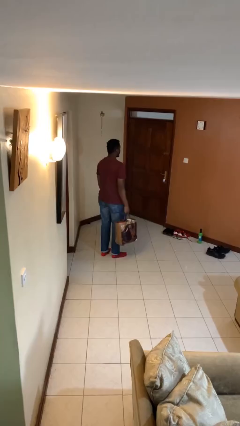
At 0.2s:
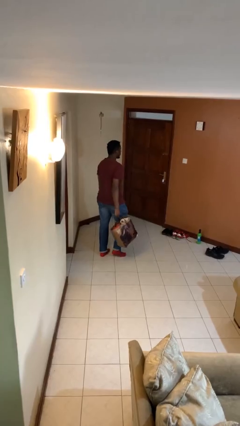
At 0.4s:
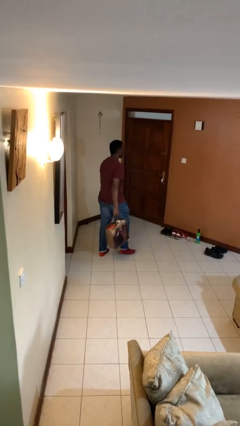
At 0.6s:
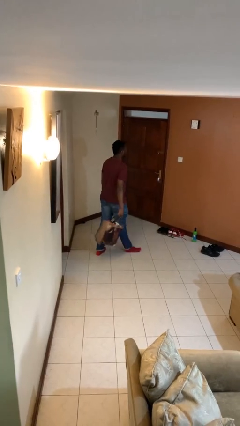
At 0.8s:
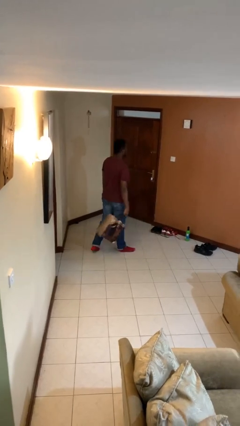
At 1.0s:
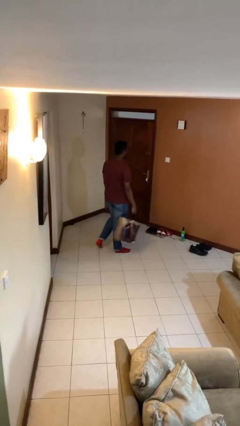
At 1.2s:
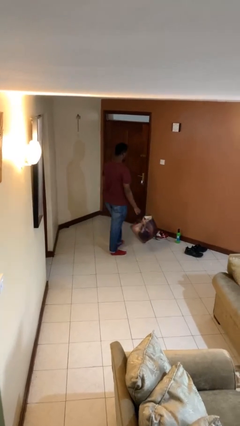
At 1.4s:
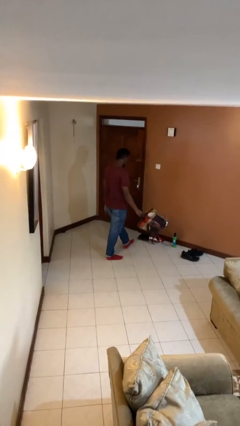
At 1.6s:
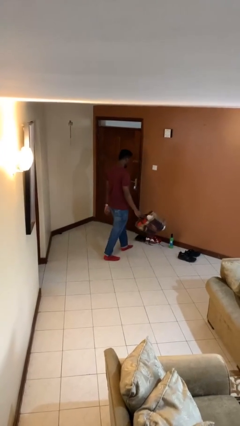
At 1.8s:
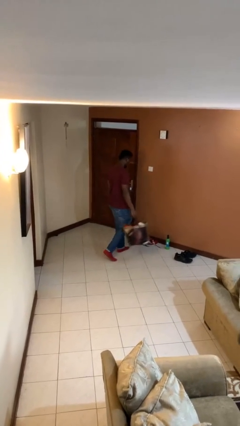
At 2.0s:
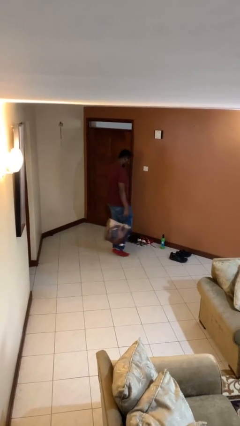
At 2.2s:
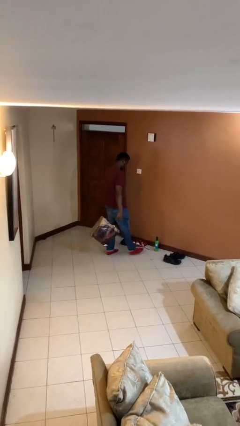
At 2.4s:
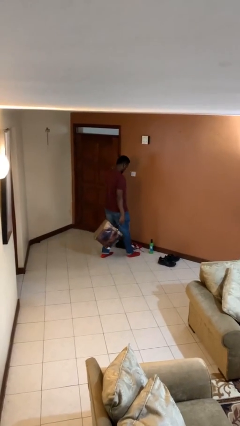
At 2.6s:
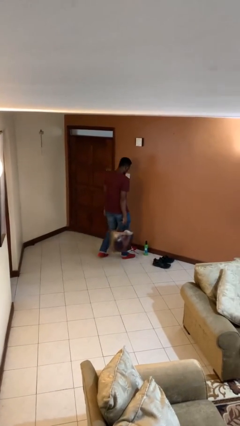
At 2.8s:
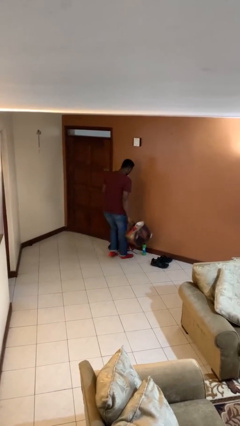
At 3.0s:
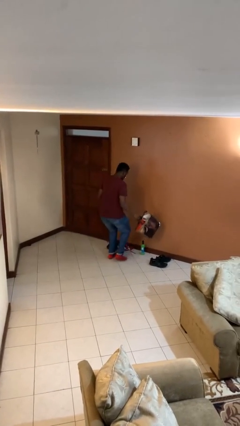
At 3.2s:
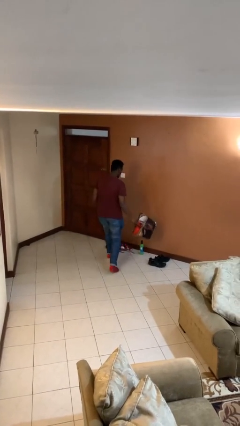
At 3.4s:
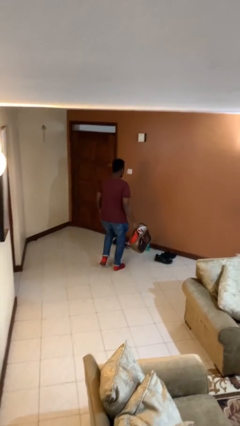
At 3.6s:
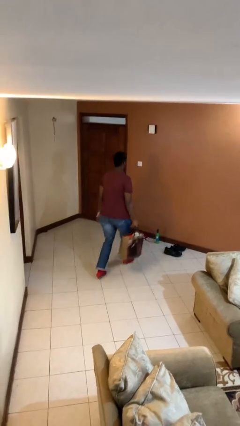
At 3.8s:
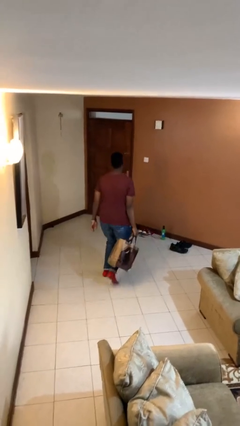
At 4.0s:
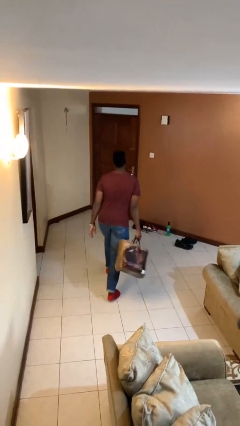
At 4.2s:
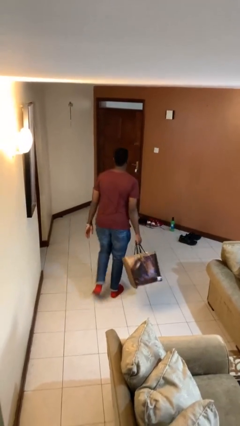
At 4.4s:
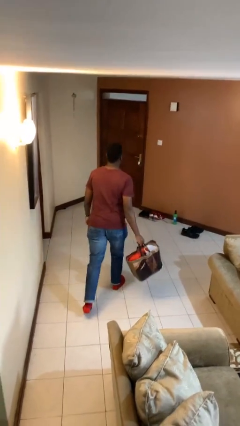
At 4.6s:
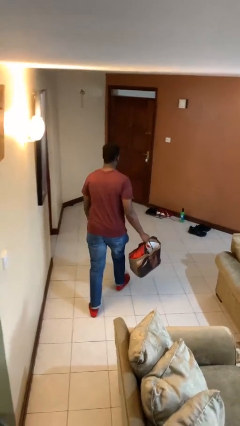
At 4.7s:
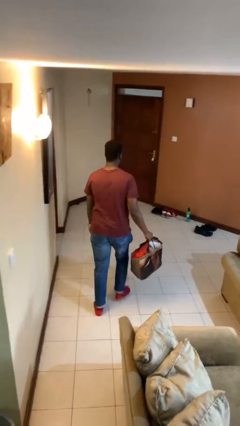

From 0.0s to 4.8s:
person carries groceries

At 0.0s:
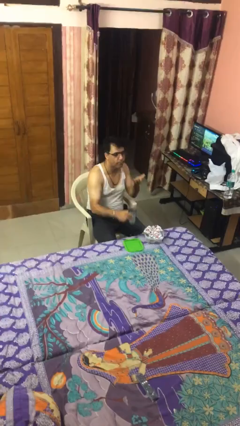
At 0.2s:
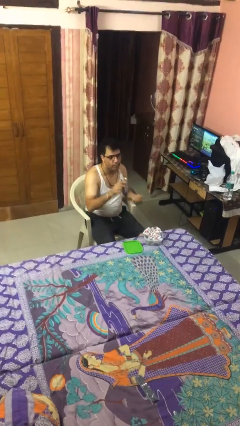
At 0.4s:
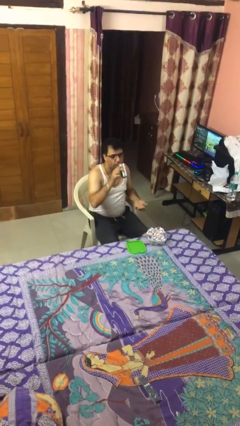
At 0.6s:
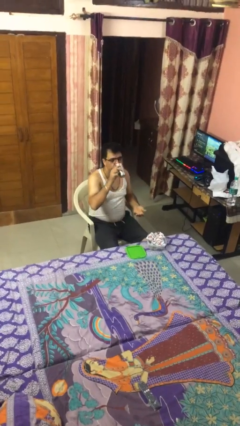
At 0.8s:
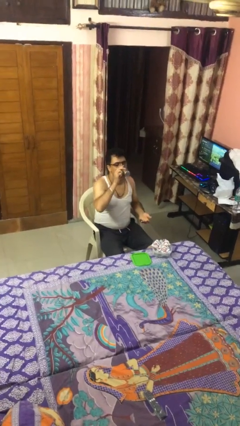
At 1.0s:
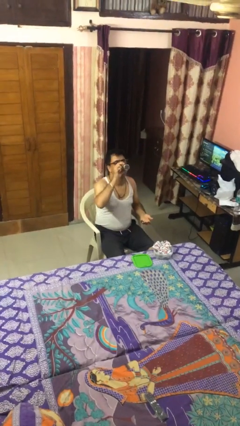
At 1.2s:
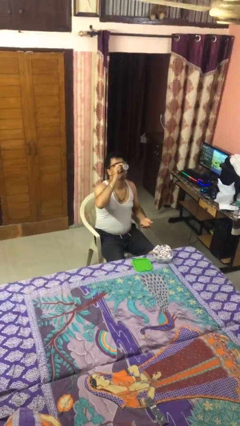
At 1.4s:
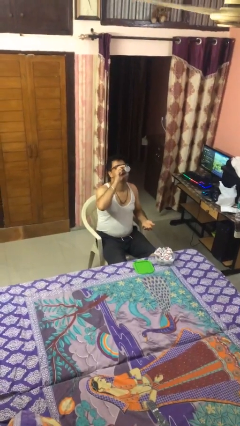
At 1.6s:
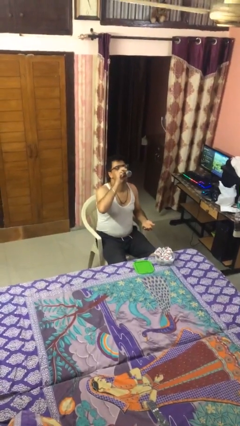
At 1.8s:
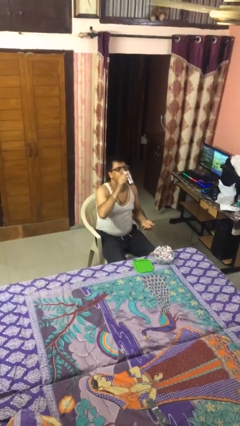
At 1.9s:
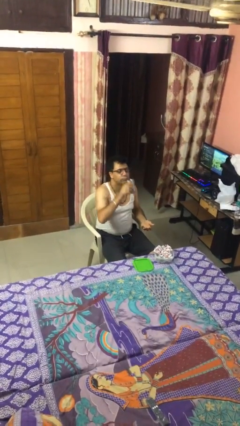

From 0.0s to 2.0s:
person drinks from cup

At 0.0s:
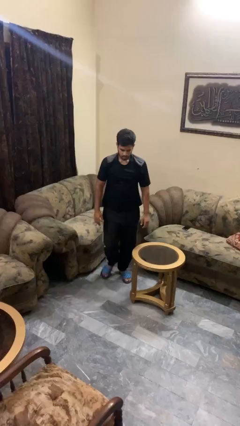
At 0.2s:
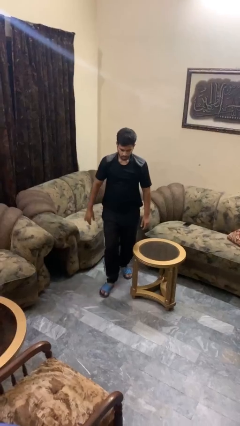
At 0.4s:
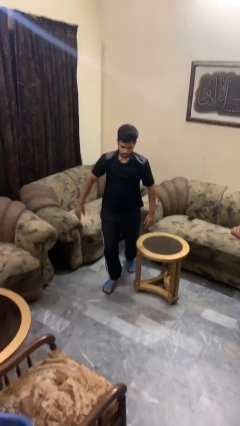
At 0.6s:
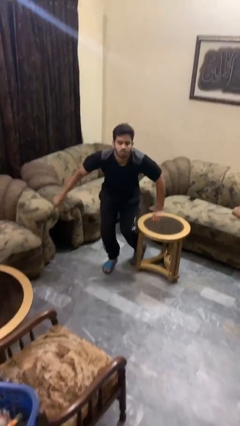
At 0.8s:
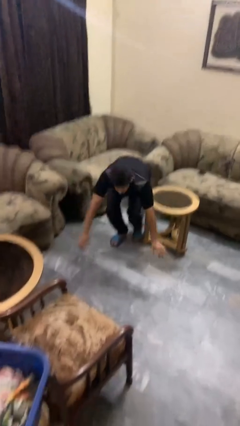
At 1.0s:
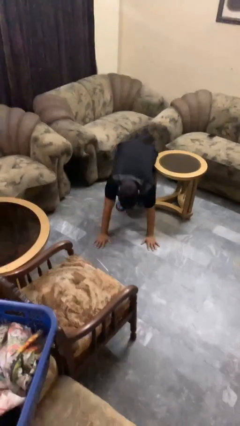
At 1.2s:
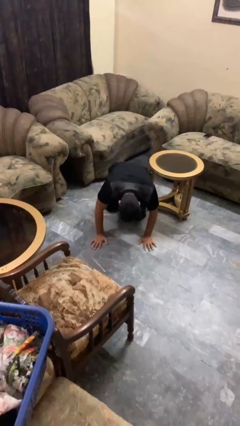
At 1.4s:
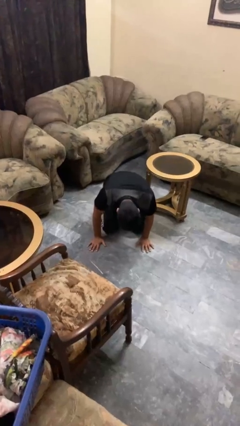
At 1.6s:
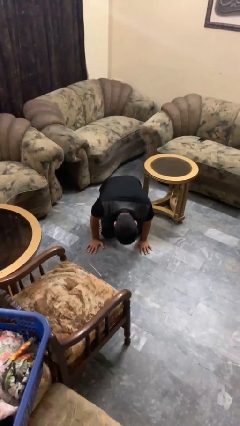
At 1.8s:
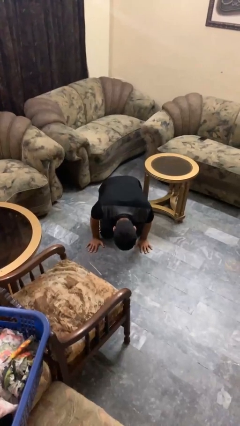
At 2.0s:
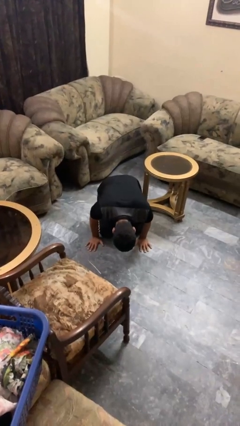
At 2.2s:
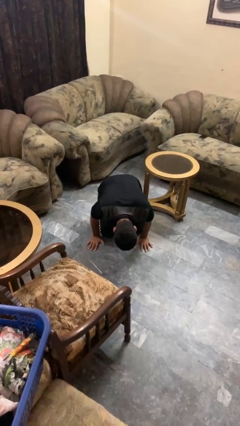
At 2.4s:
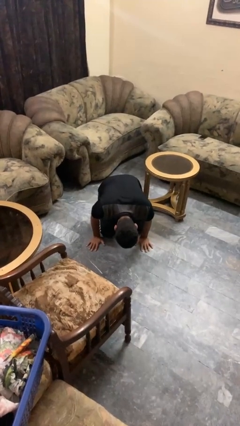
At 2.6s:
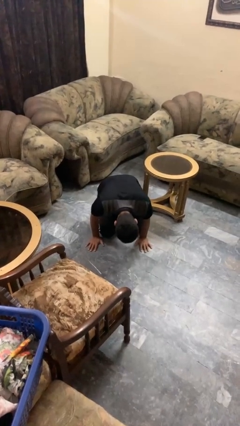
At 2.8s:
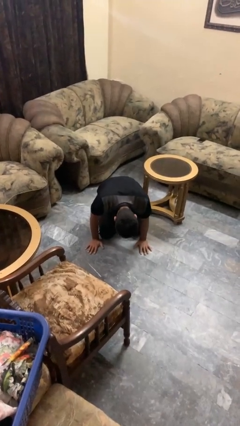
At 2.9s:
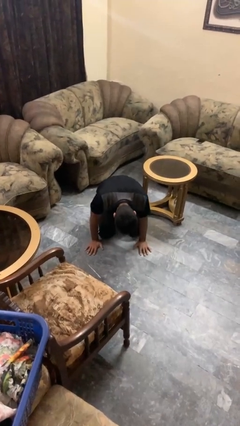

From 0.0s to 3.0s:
person trips on object on floor

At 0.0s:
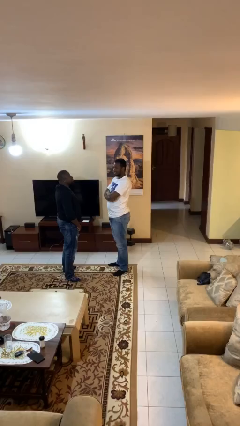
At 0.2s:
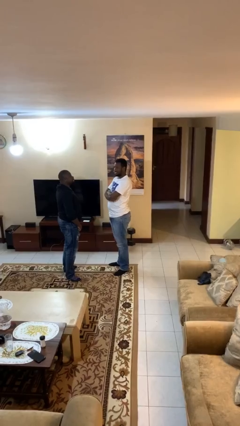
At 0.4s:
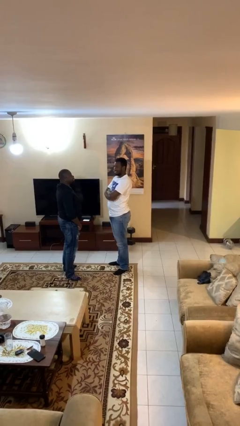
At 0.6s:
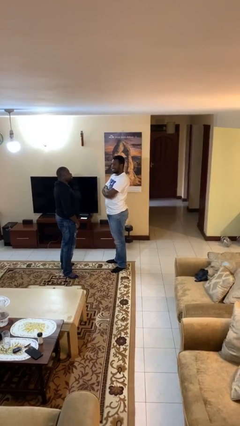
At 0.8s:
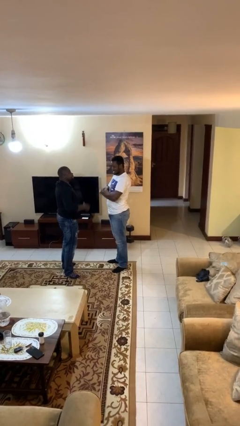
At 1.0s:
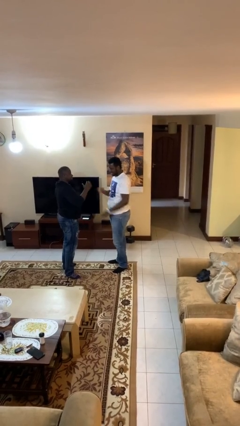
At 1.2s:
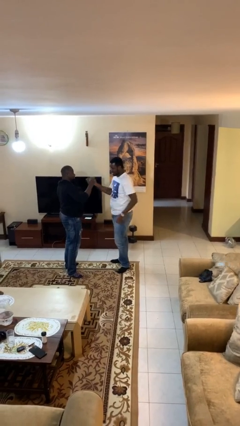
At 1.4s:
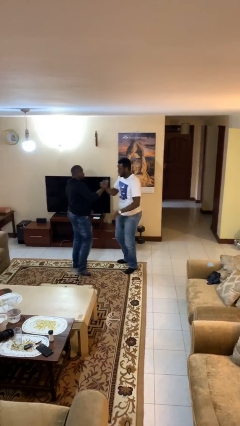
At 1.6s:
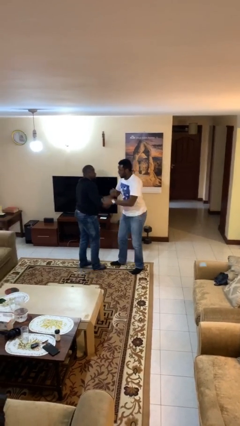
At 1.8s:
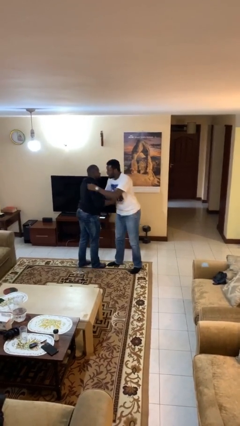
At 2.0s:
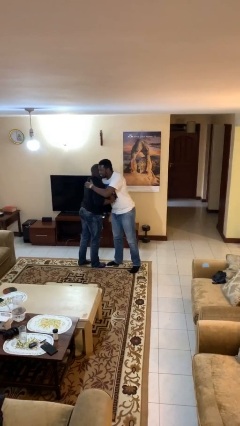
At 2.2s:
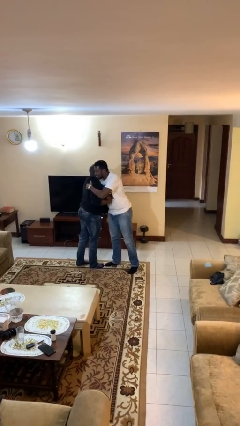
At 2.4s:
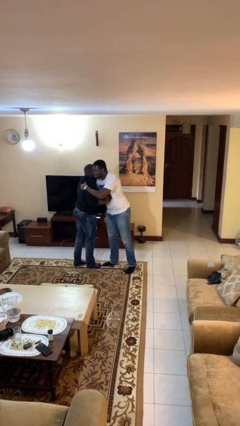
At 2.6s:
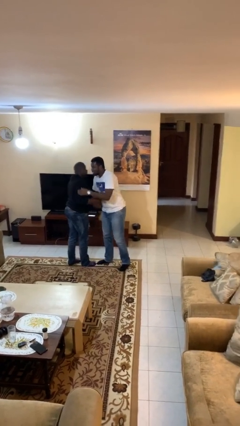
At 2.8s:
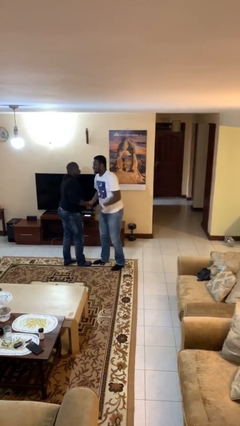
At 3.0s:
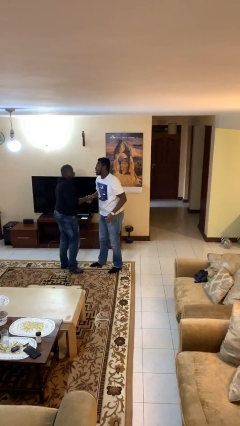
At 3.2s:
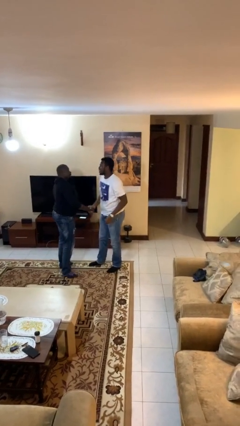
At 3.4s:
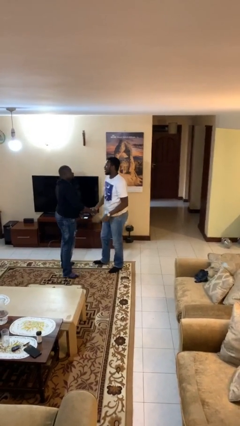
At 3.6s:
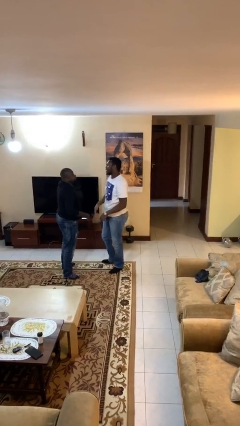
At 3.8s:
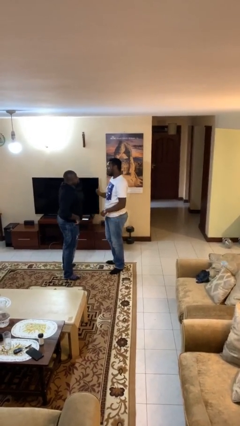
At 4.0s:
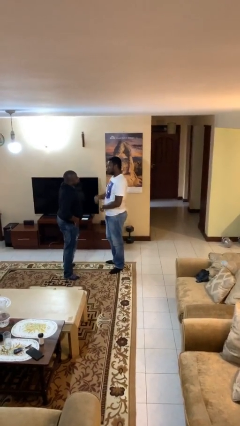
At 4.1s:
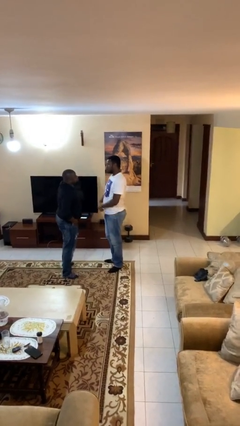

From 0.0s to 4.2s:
person embraces person

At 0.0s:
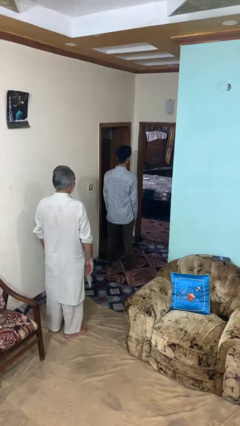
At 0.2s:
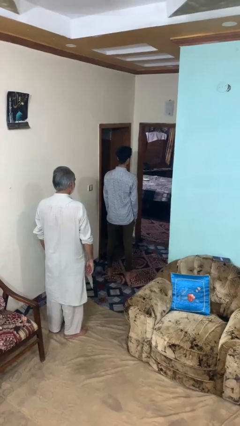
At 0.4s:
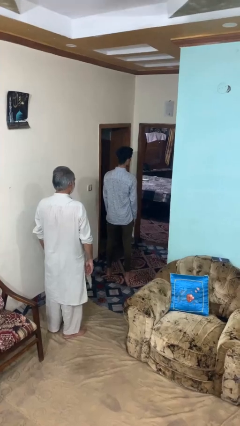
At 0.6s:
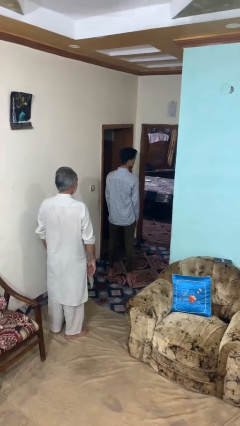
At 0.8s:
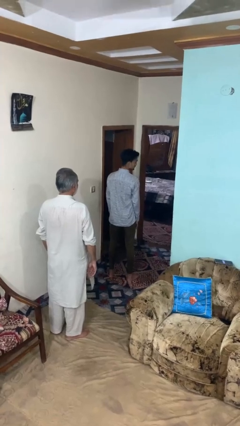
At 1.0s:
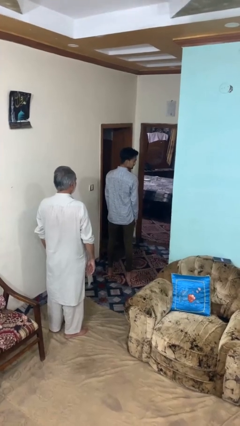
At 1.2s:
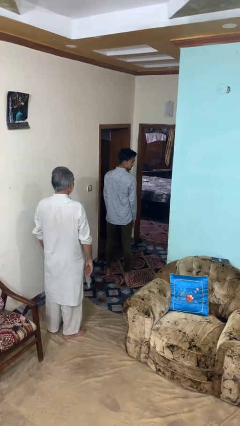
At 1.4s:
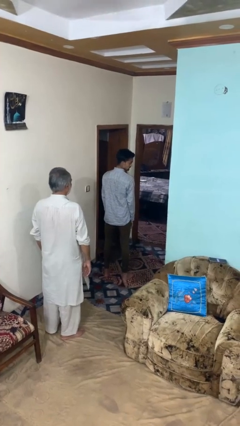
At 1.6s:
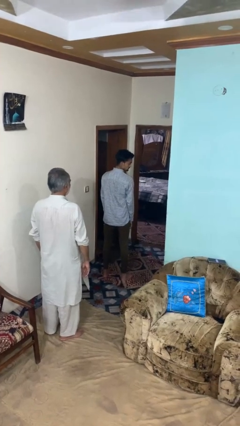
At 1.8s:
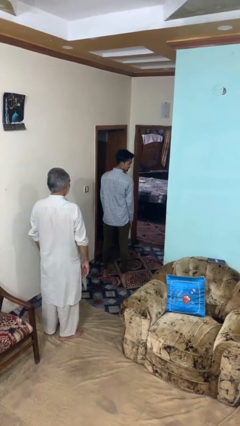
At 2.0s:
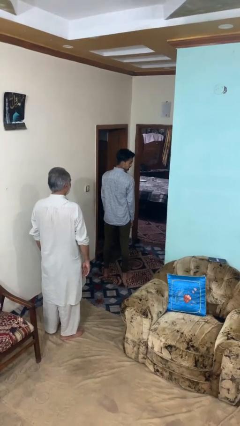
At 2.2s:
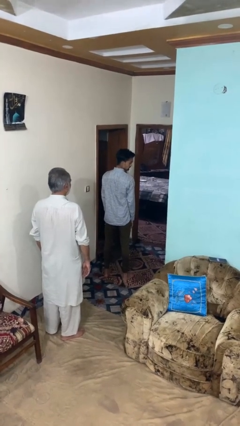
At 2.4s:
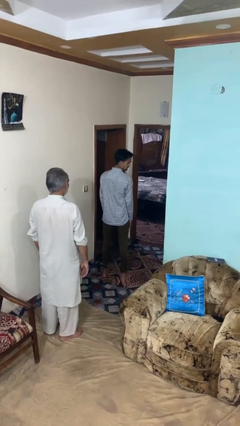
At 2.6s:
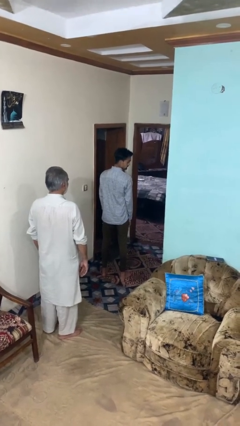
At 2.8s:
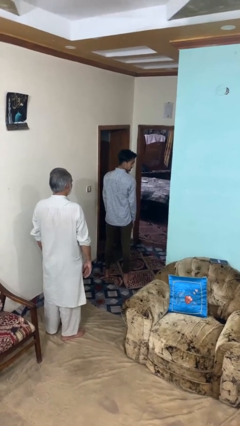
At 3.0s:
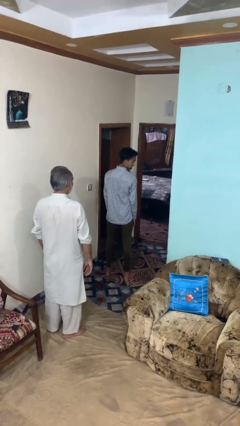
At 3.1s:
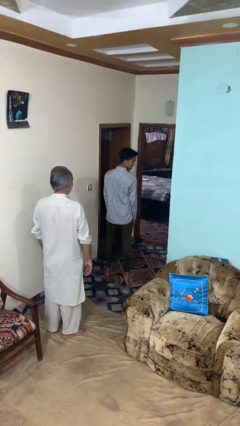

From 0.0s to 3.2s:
person looks over shoulder

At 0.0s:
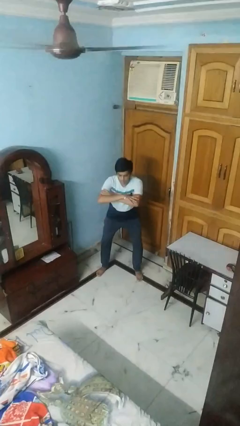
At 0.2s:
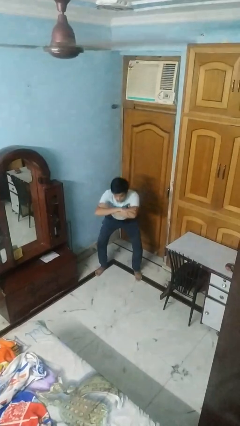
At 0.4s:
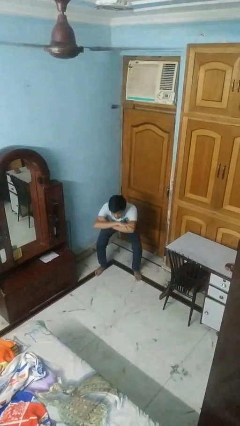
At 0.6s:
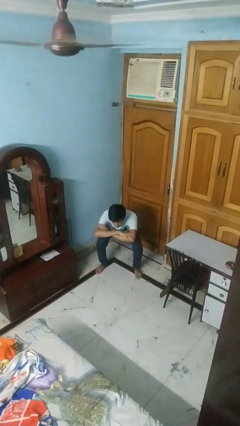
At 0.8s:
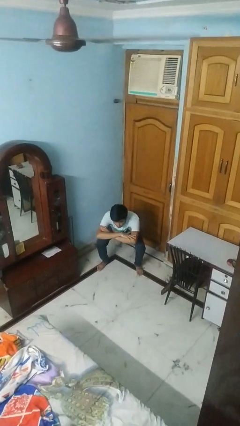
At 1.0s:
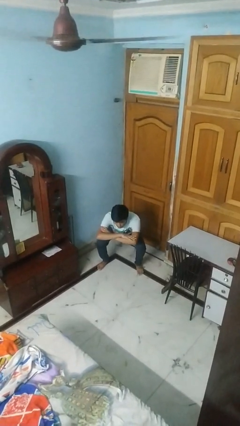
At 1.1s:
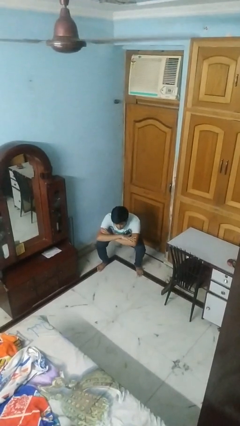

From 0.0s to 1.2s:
person squats
